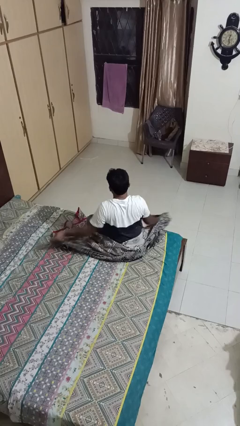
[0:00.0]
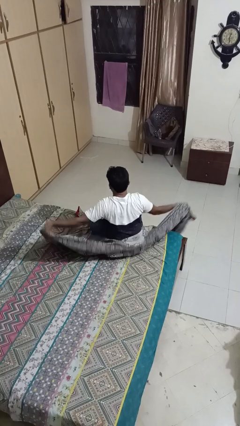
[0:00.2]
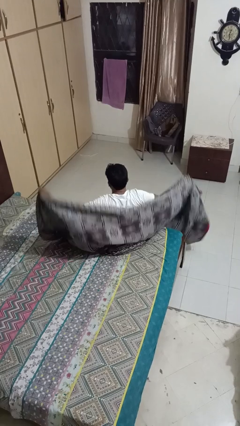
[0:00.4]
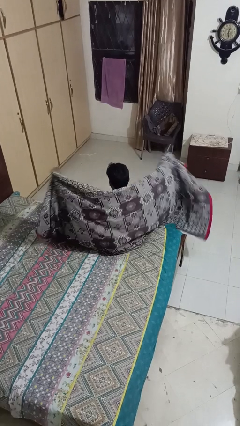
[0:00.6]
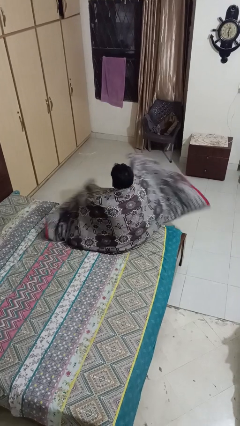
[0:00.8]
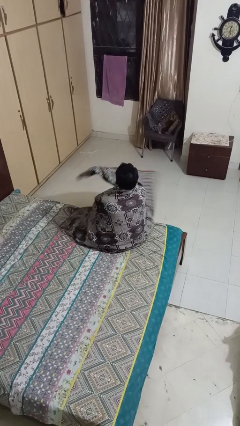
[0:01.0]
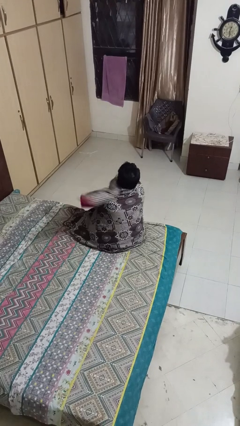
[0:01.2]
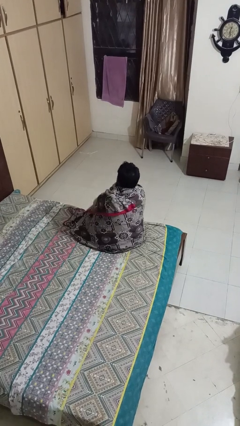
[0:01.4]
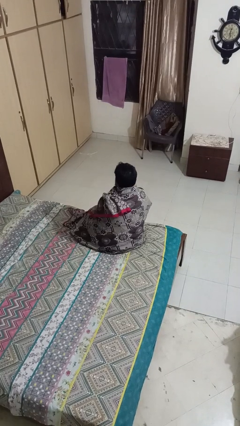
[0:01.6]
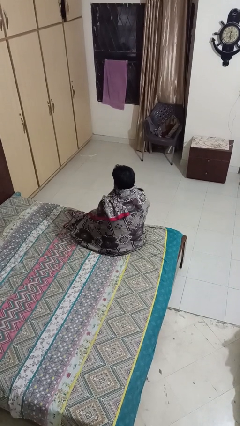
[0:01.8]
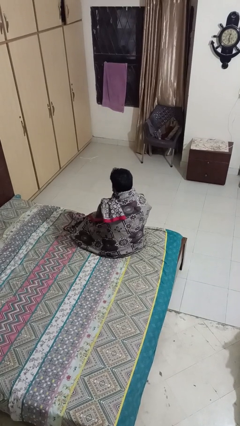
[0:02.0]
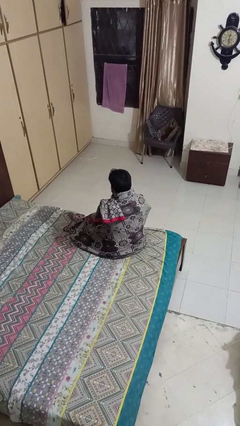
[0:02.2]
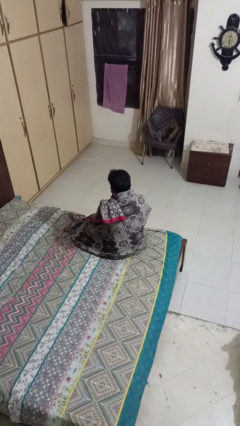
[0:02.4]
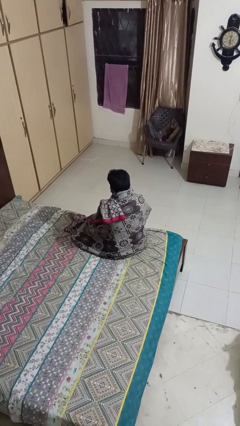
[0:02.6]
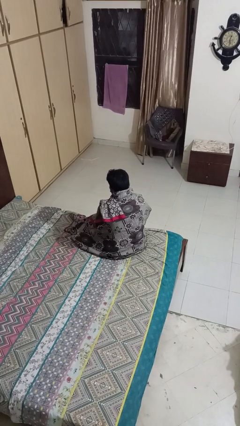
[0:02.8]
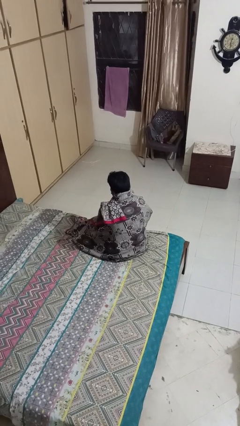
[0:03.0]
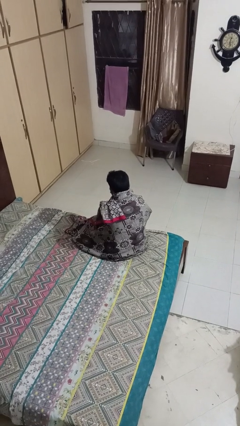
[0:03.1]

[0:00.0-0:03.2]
person covers with blanket

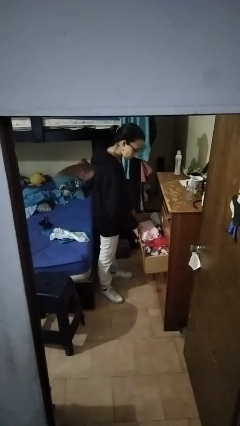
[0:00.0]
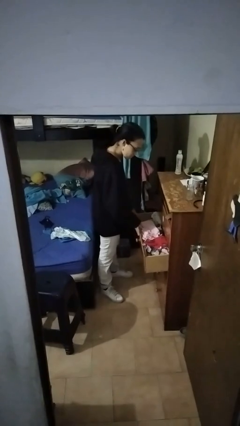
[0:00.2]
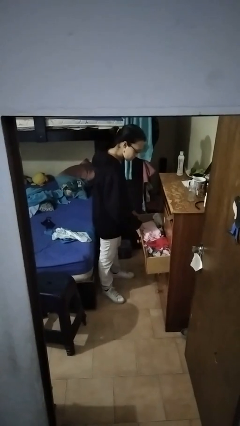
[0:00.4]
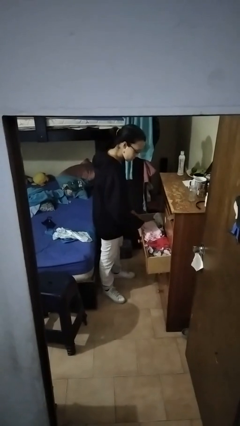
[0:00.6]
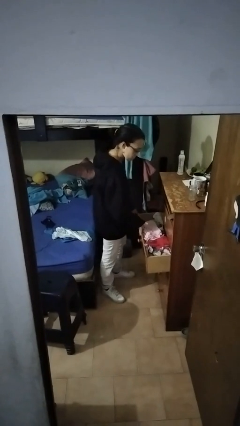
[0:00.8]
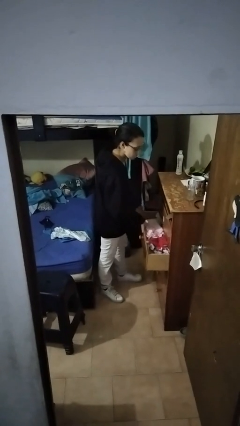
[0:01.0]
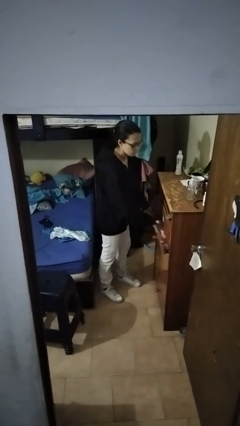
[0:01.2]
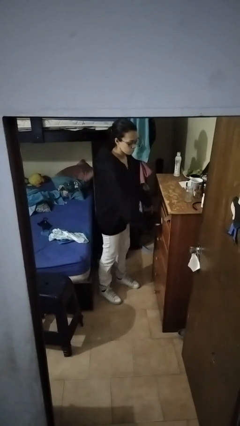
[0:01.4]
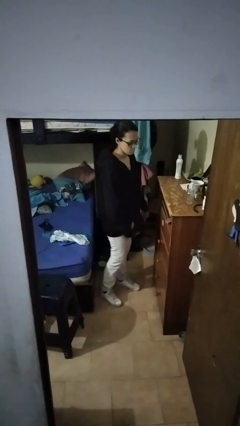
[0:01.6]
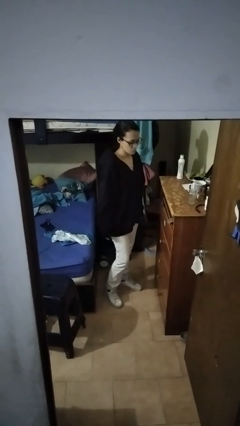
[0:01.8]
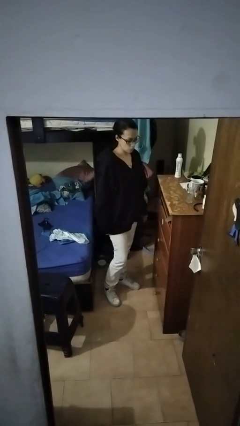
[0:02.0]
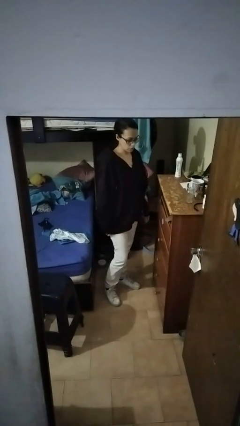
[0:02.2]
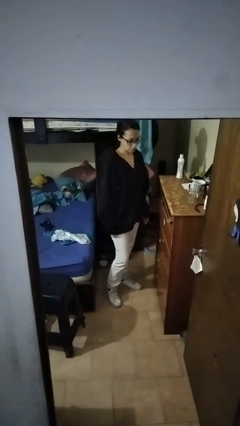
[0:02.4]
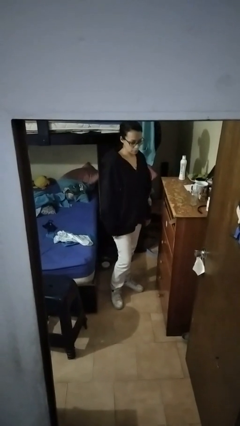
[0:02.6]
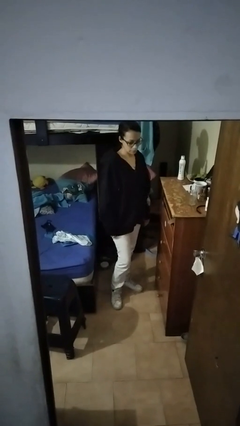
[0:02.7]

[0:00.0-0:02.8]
person closes dresser drawer

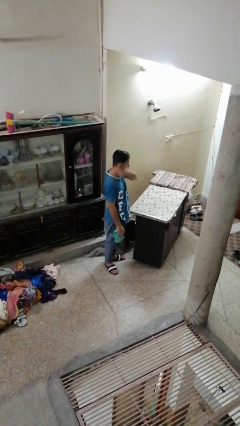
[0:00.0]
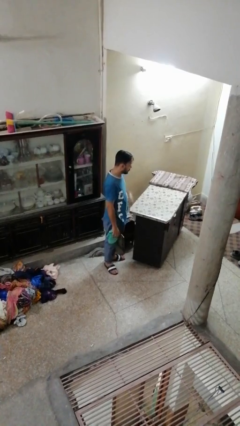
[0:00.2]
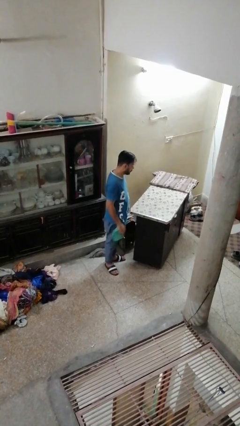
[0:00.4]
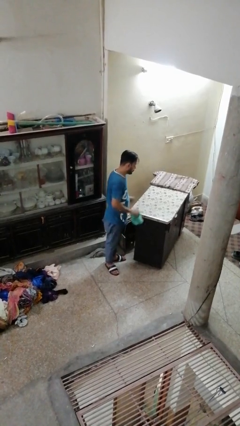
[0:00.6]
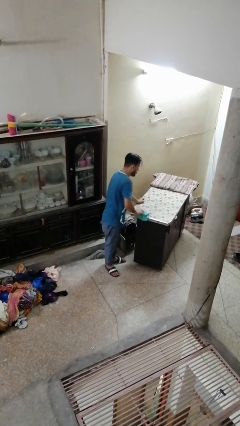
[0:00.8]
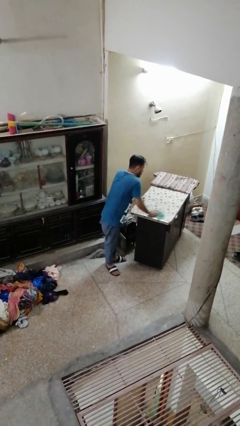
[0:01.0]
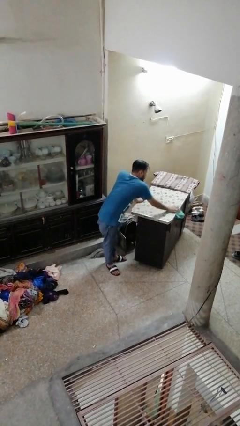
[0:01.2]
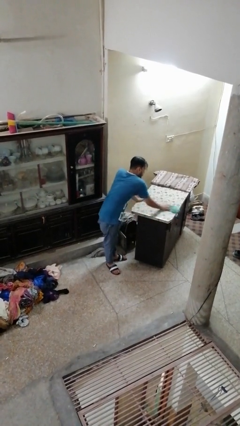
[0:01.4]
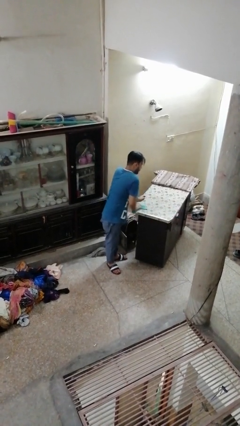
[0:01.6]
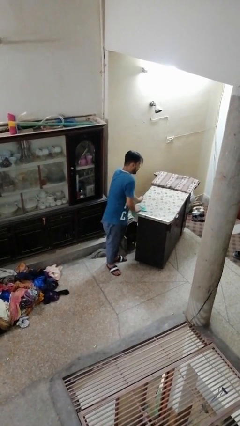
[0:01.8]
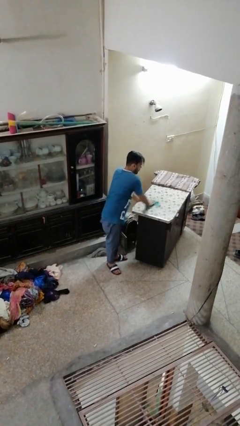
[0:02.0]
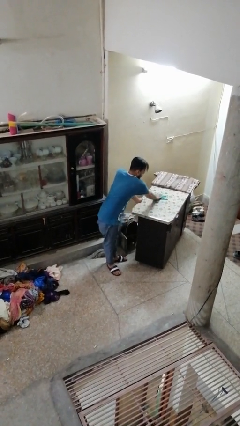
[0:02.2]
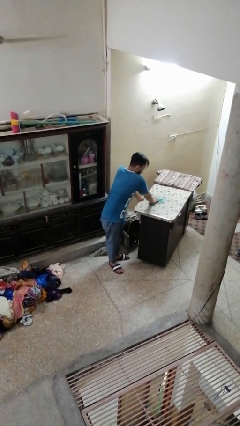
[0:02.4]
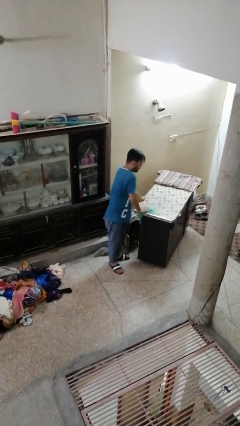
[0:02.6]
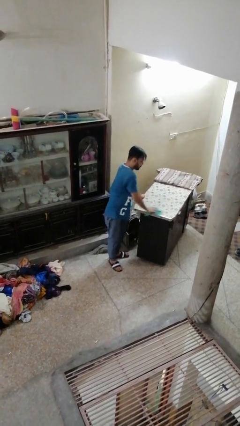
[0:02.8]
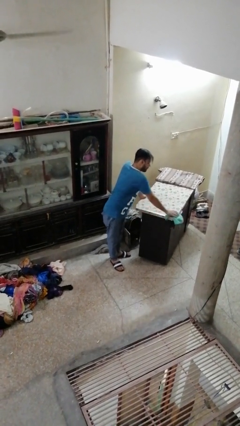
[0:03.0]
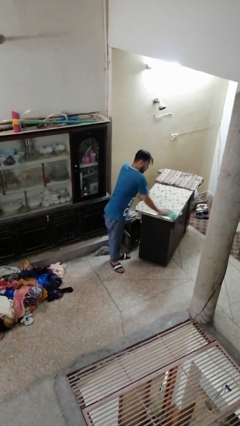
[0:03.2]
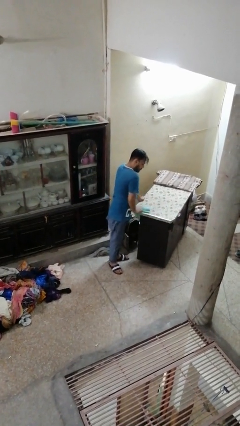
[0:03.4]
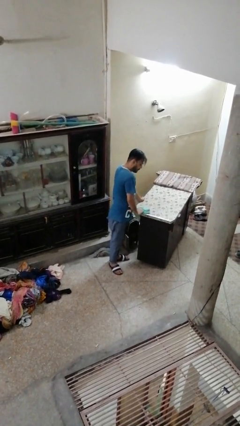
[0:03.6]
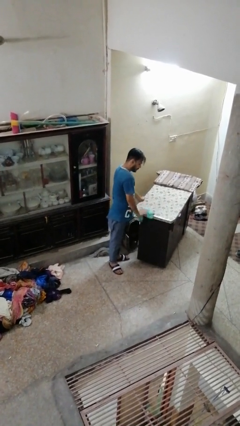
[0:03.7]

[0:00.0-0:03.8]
person cleans table with rag

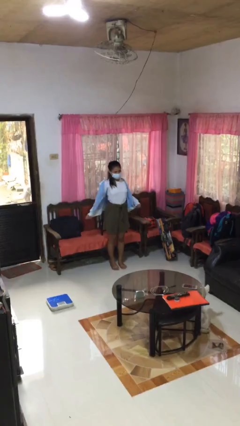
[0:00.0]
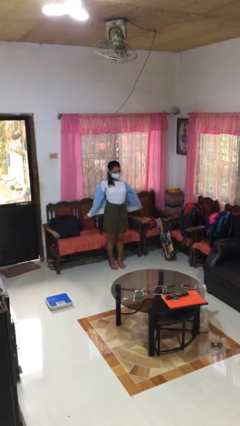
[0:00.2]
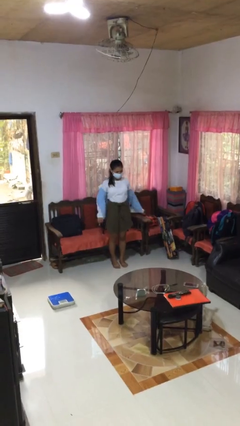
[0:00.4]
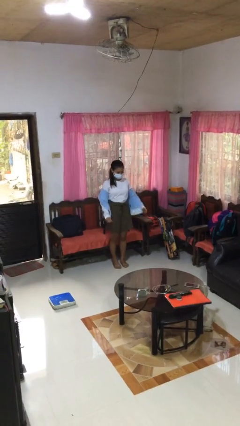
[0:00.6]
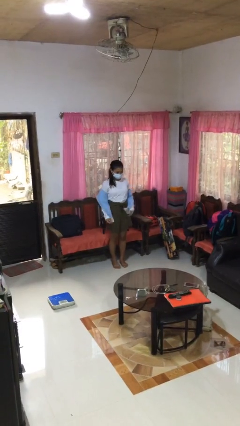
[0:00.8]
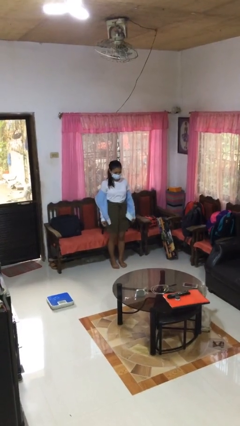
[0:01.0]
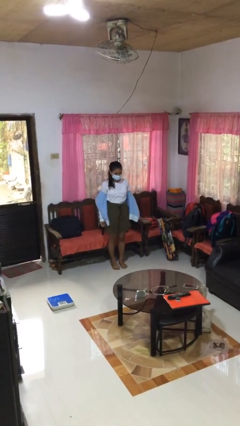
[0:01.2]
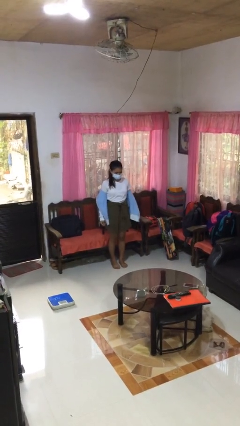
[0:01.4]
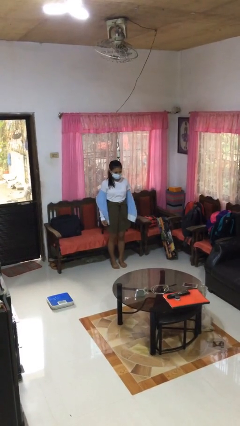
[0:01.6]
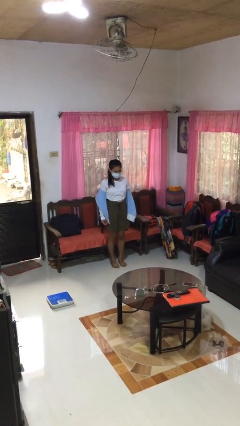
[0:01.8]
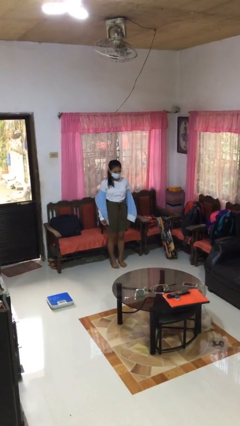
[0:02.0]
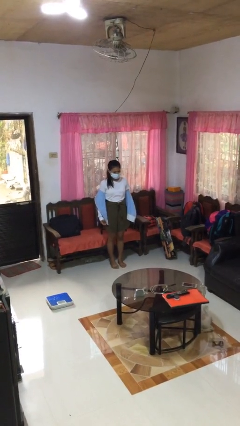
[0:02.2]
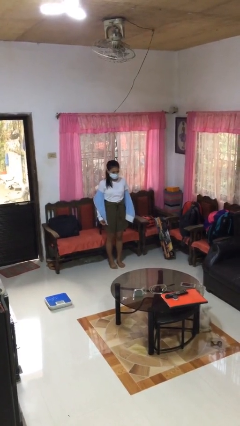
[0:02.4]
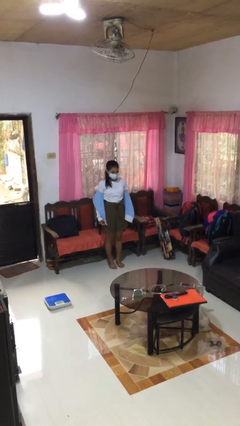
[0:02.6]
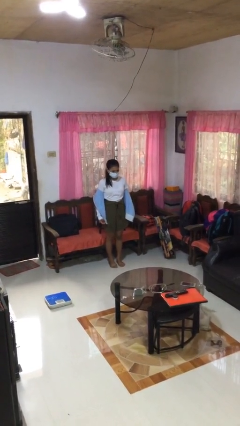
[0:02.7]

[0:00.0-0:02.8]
person takes off jacket

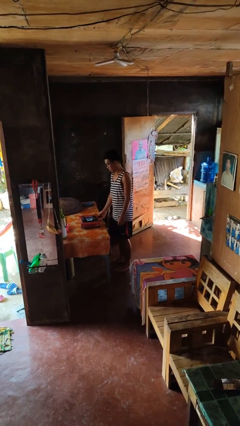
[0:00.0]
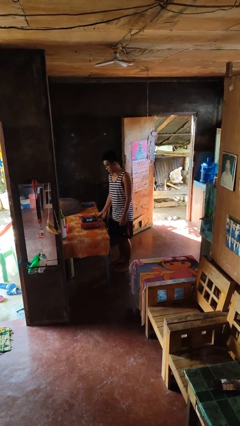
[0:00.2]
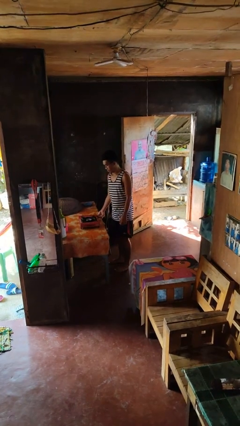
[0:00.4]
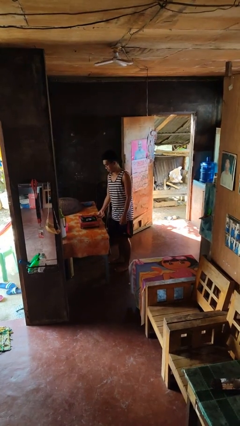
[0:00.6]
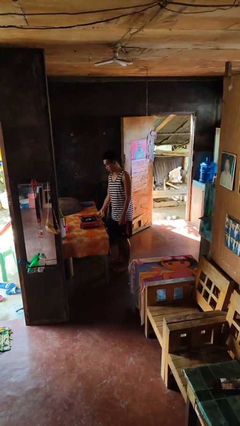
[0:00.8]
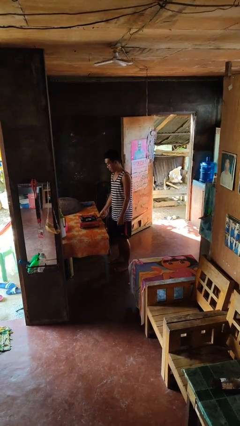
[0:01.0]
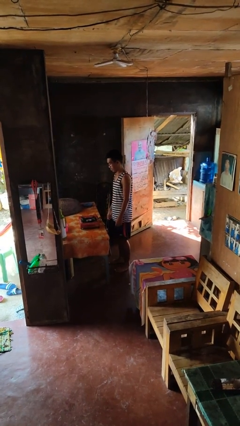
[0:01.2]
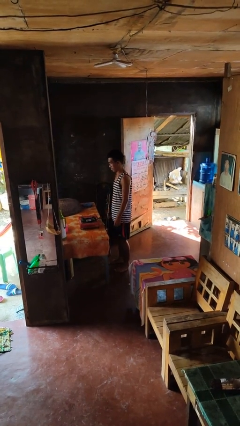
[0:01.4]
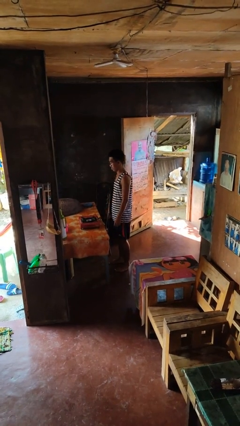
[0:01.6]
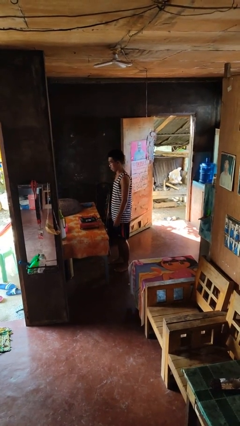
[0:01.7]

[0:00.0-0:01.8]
person turns off stovetop

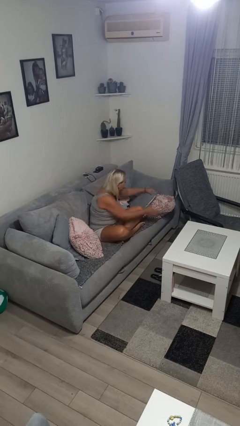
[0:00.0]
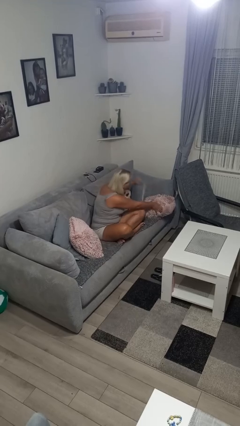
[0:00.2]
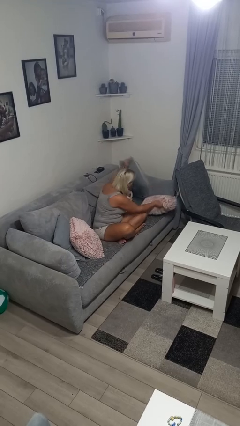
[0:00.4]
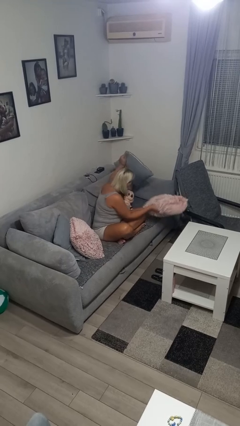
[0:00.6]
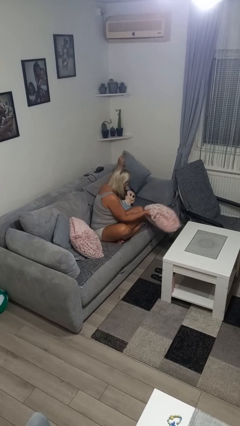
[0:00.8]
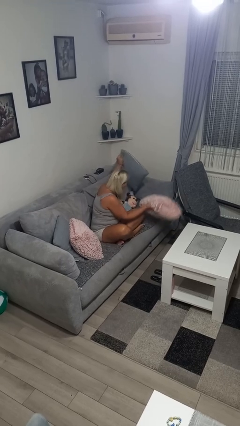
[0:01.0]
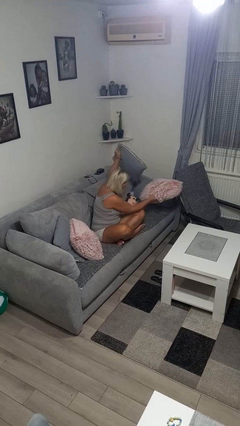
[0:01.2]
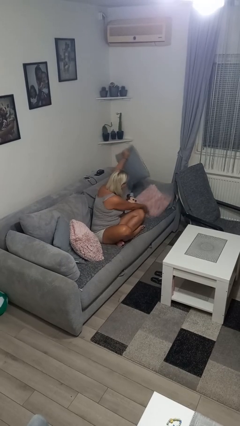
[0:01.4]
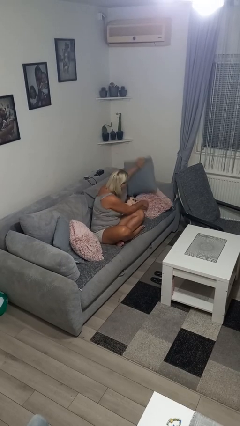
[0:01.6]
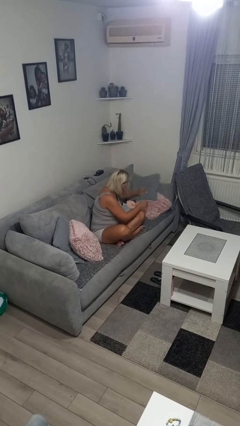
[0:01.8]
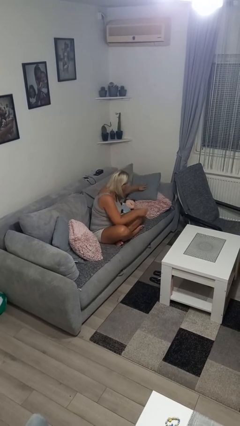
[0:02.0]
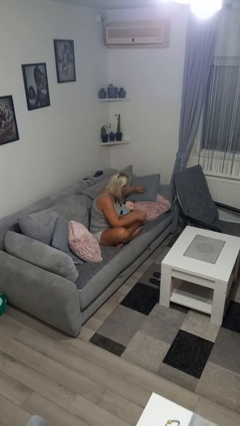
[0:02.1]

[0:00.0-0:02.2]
person searches in couch

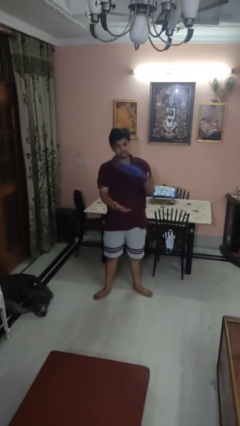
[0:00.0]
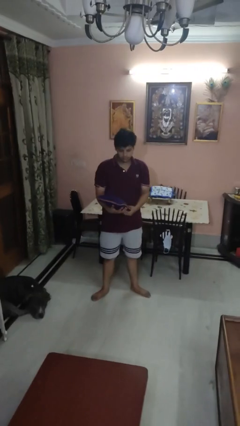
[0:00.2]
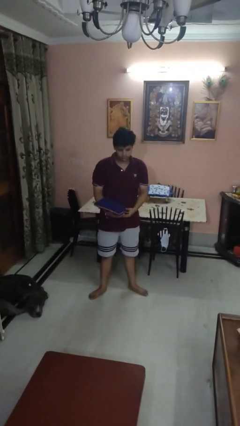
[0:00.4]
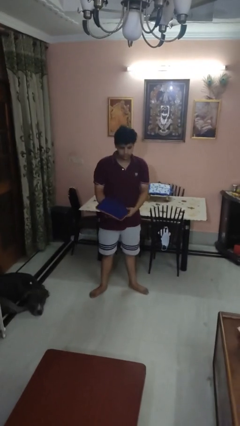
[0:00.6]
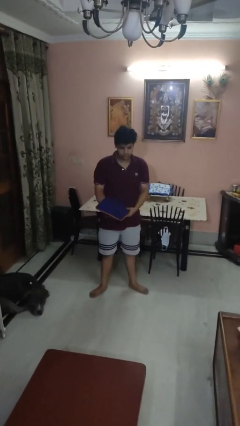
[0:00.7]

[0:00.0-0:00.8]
person catches dropped object
